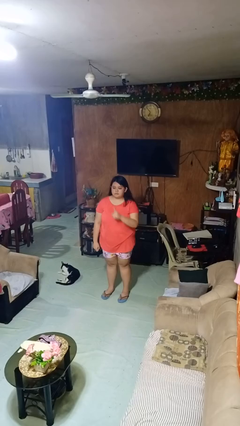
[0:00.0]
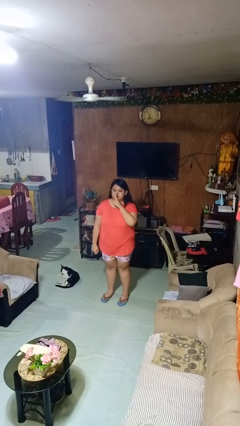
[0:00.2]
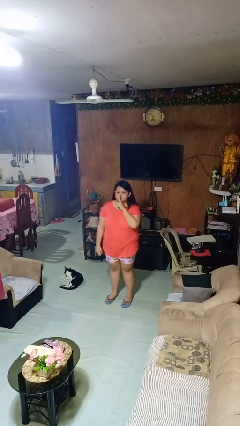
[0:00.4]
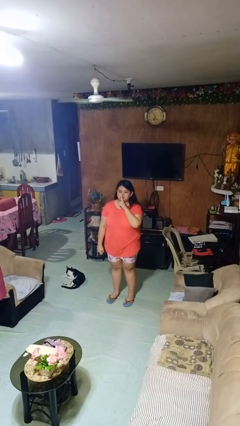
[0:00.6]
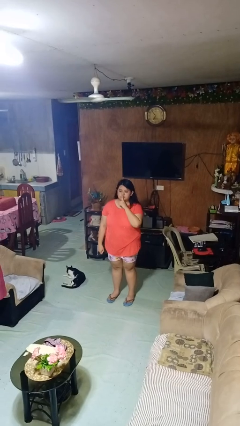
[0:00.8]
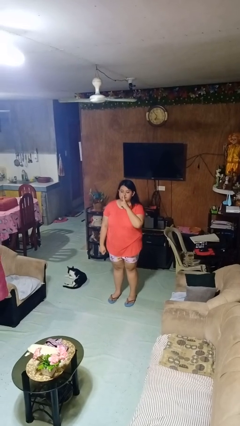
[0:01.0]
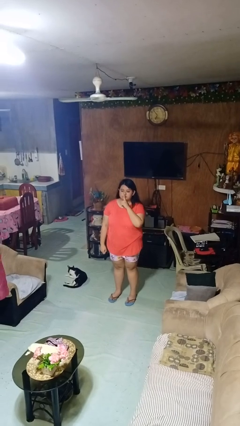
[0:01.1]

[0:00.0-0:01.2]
person gestures be quiet

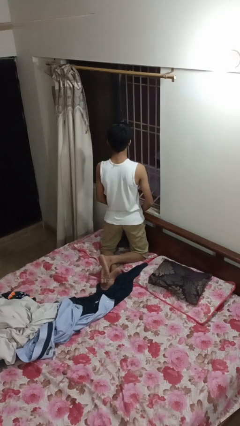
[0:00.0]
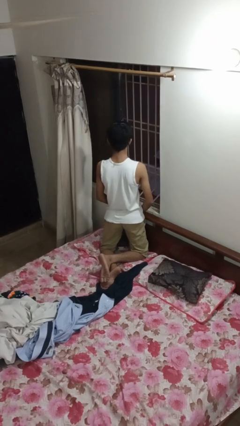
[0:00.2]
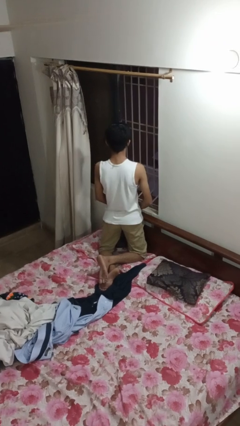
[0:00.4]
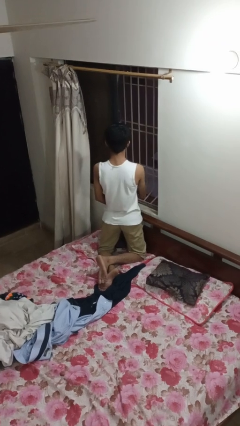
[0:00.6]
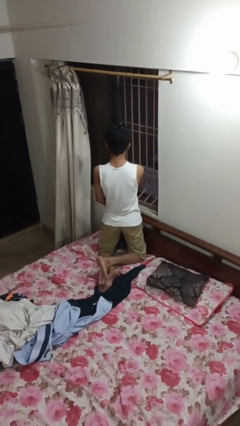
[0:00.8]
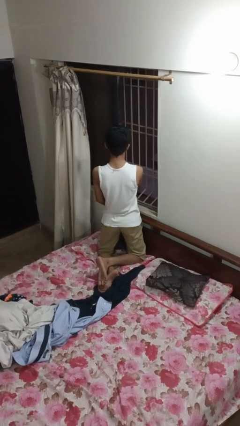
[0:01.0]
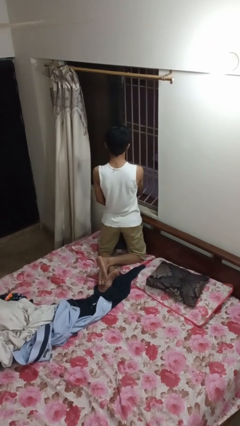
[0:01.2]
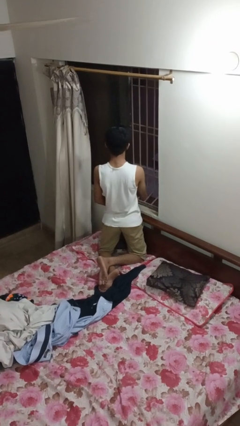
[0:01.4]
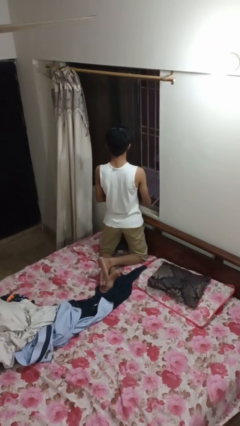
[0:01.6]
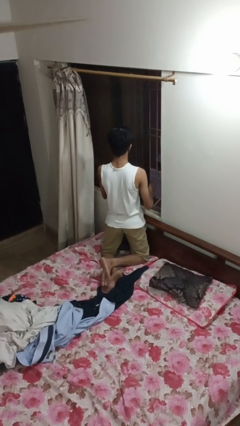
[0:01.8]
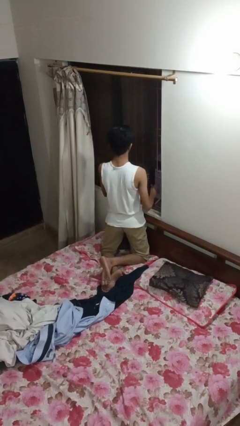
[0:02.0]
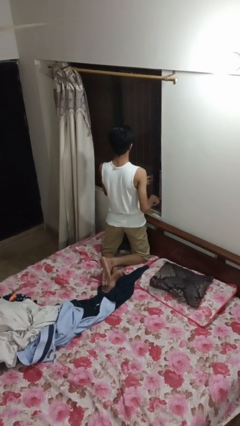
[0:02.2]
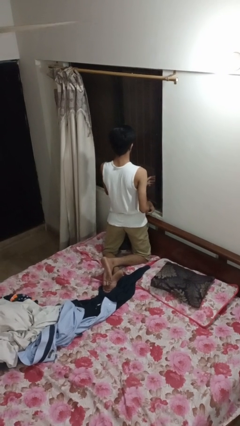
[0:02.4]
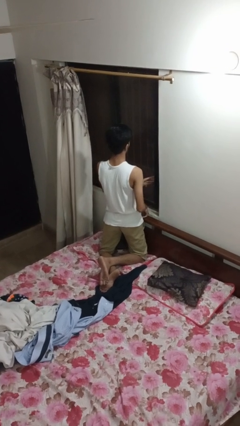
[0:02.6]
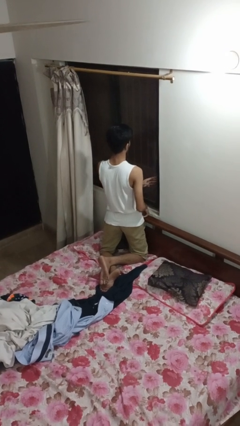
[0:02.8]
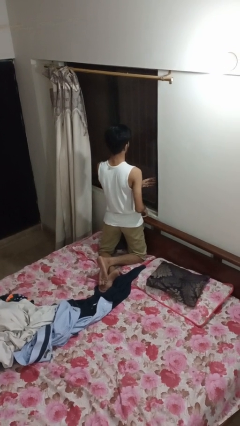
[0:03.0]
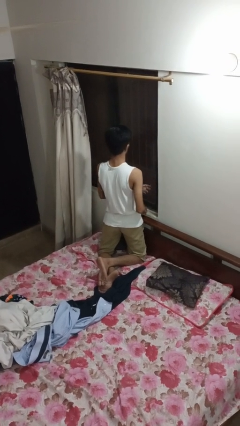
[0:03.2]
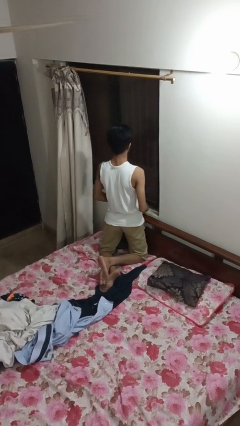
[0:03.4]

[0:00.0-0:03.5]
person closes home window

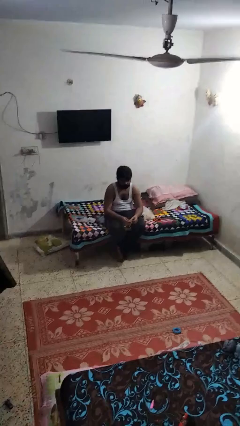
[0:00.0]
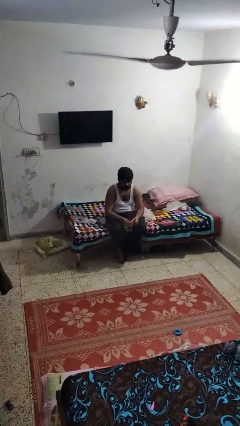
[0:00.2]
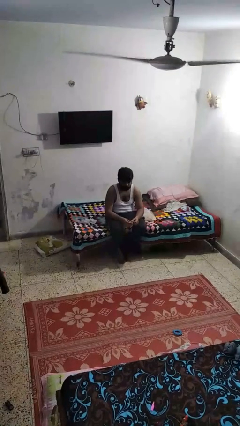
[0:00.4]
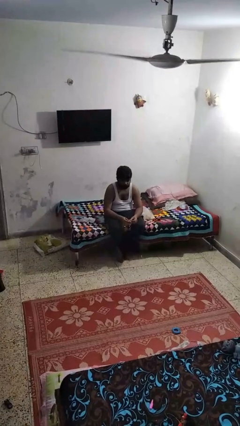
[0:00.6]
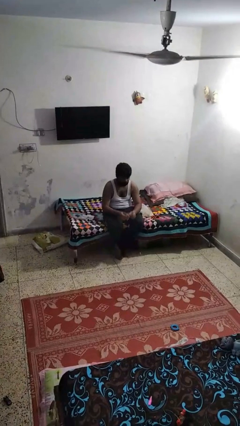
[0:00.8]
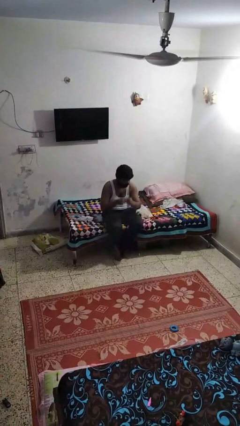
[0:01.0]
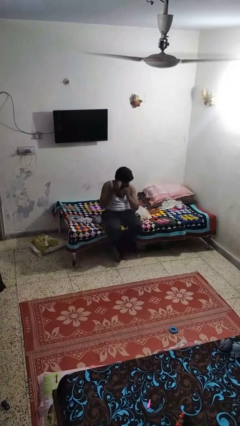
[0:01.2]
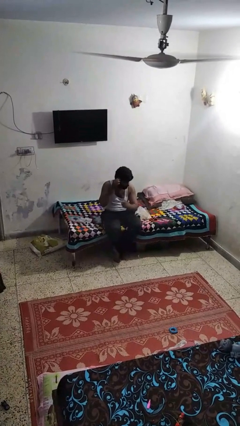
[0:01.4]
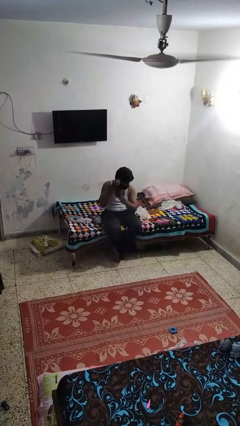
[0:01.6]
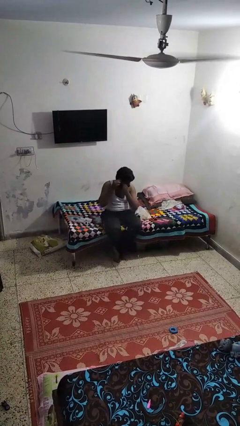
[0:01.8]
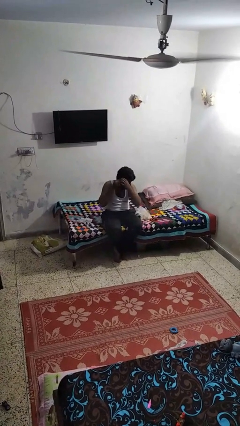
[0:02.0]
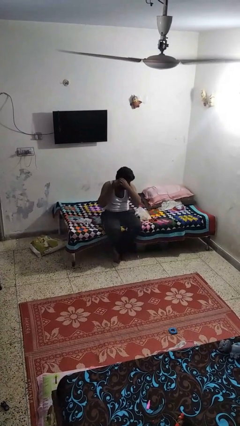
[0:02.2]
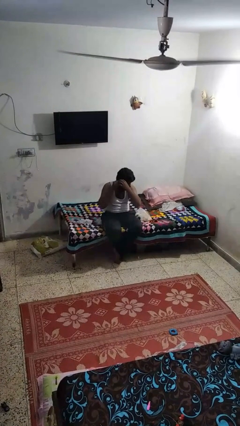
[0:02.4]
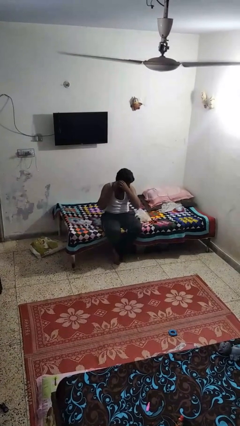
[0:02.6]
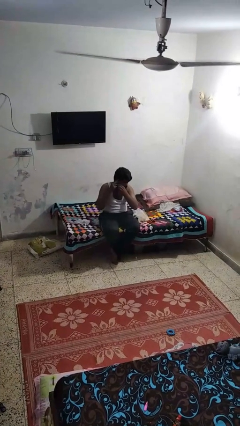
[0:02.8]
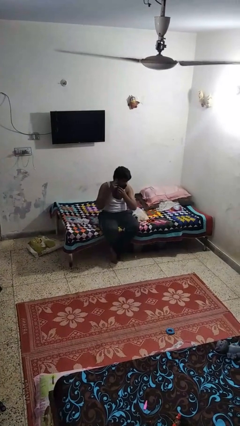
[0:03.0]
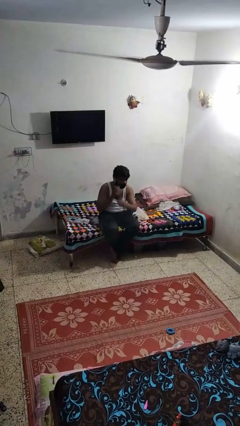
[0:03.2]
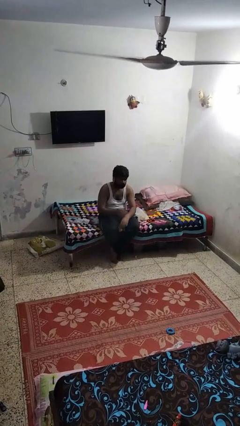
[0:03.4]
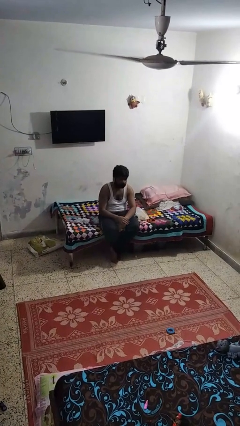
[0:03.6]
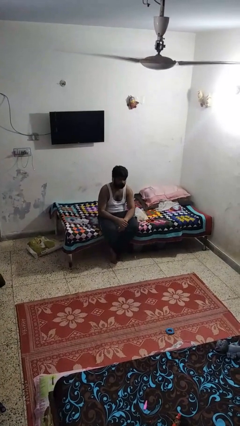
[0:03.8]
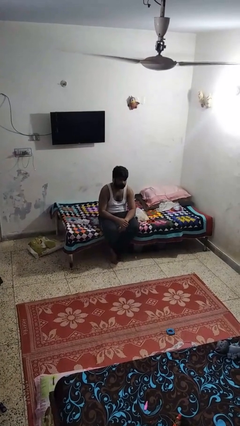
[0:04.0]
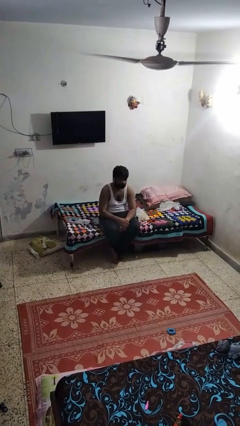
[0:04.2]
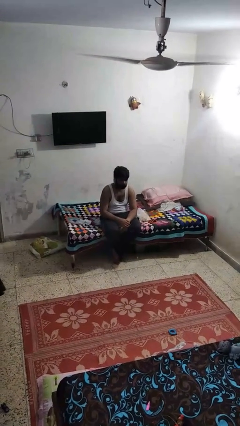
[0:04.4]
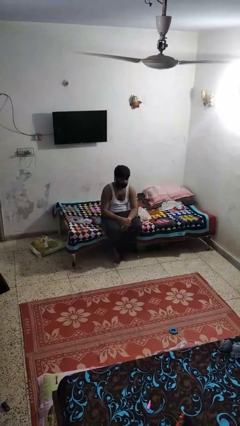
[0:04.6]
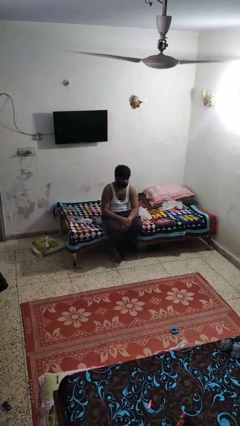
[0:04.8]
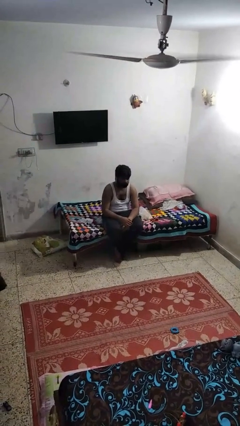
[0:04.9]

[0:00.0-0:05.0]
person puts on earrings

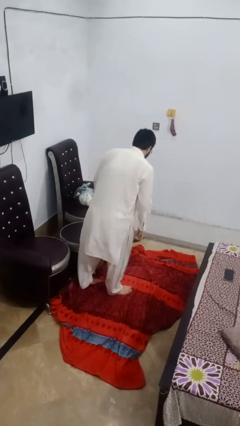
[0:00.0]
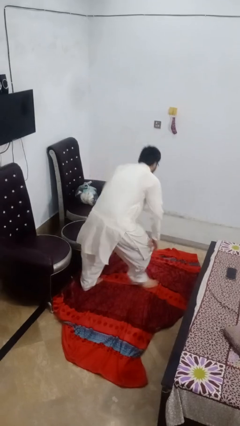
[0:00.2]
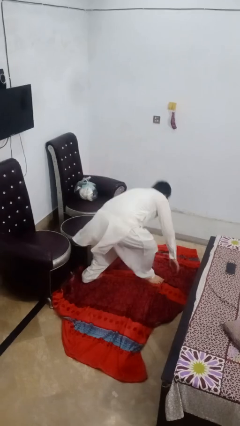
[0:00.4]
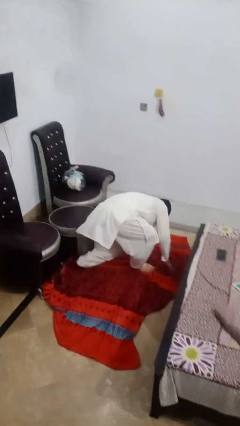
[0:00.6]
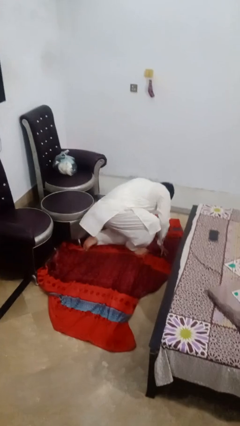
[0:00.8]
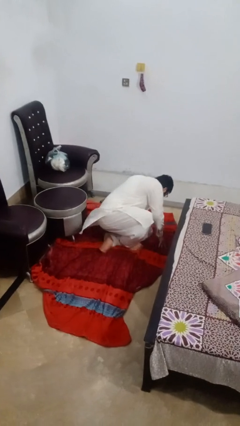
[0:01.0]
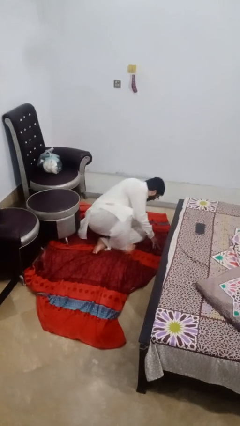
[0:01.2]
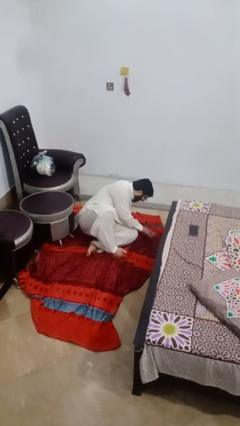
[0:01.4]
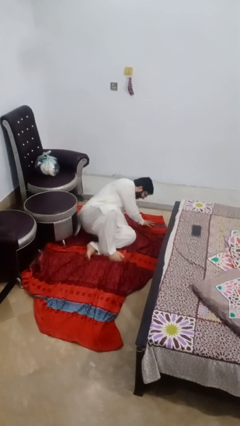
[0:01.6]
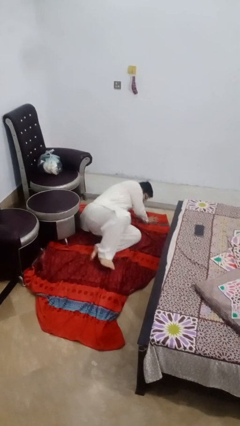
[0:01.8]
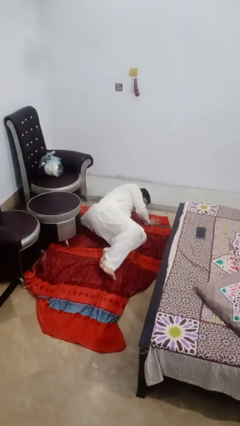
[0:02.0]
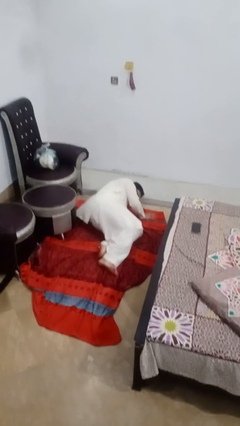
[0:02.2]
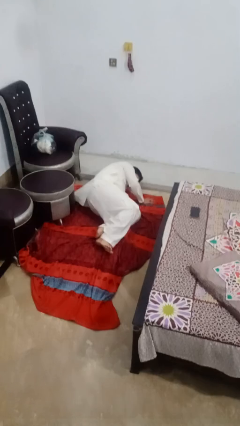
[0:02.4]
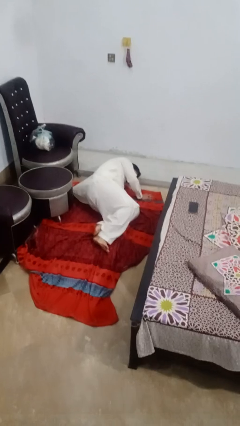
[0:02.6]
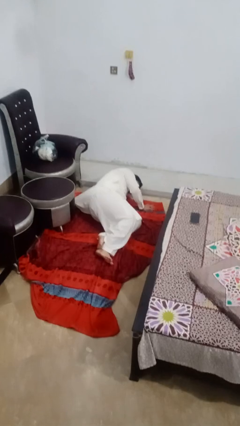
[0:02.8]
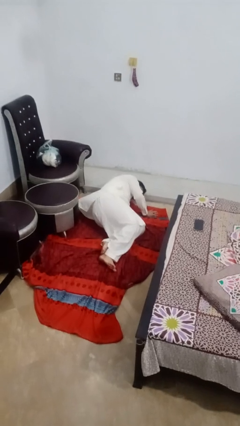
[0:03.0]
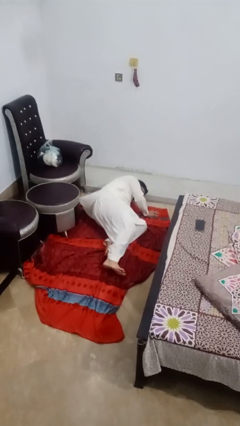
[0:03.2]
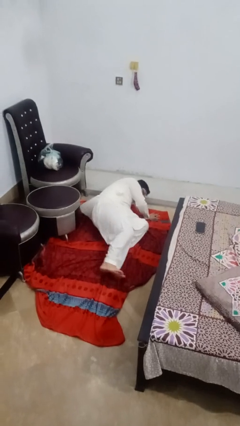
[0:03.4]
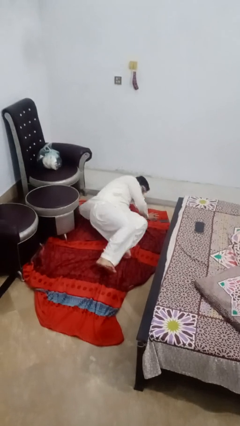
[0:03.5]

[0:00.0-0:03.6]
person lies down on floor

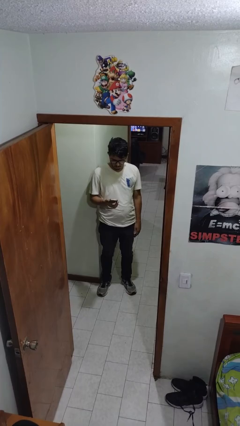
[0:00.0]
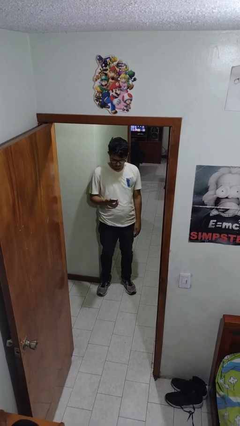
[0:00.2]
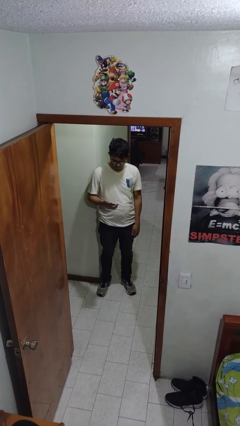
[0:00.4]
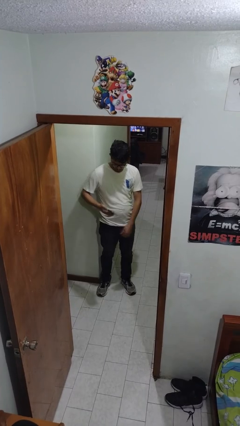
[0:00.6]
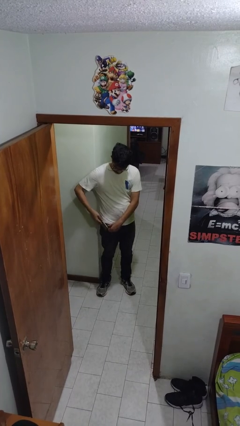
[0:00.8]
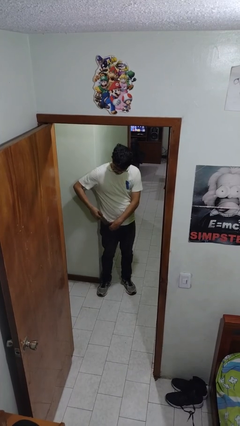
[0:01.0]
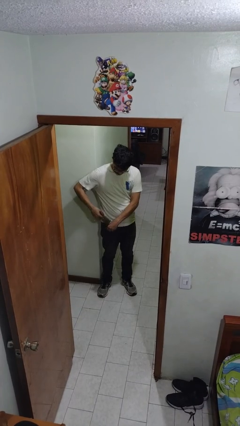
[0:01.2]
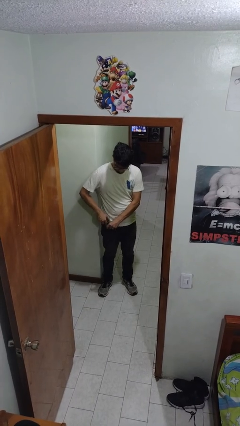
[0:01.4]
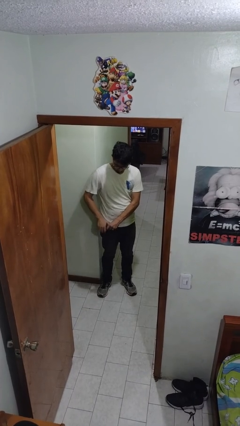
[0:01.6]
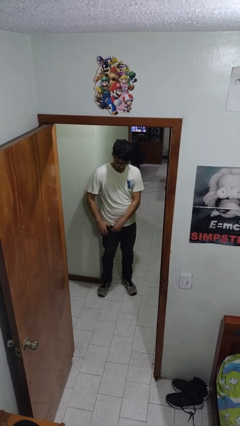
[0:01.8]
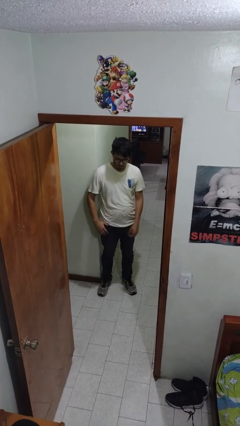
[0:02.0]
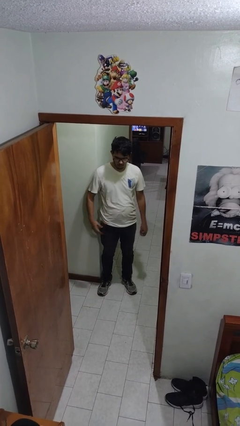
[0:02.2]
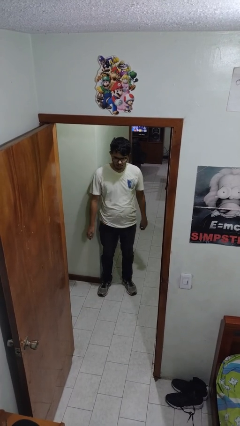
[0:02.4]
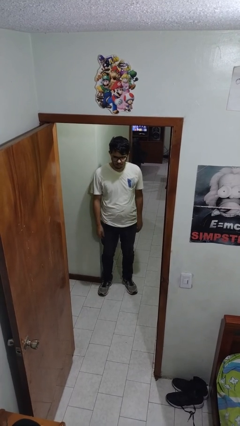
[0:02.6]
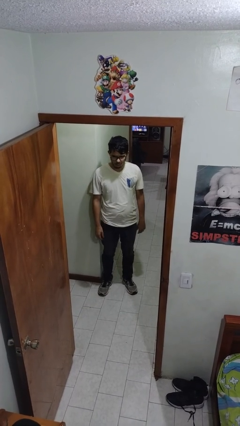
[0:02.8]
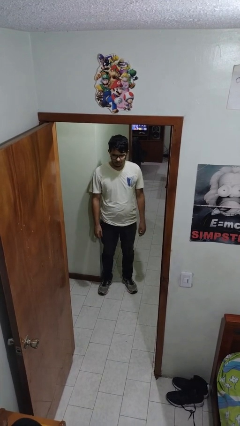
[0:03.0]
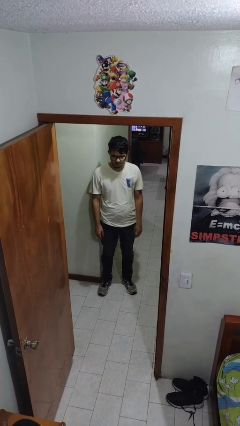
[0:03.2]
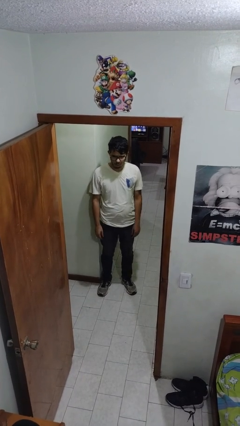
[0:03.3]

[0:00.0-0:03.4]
person puts phone into pocket

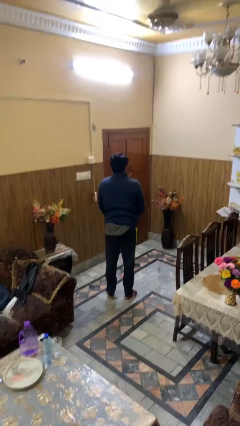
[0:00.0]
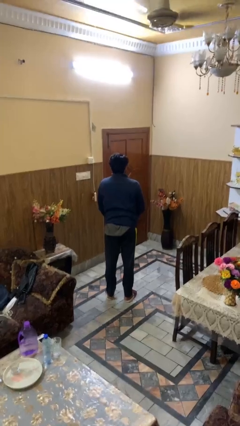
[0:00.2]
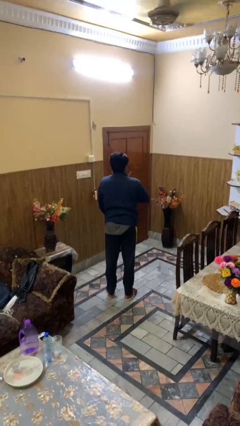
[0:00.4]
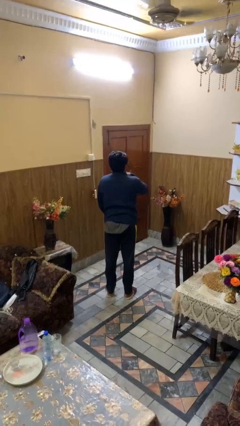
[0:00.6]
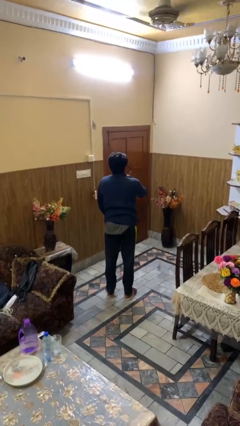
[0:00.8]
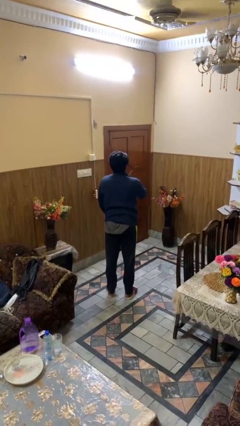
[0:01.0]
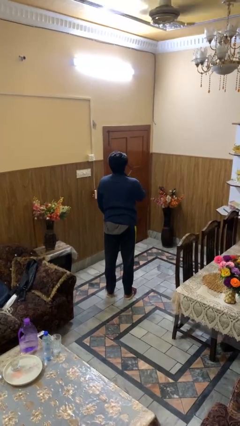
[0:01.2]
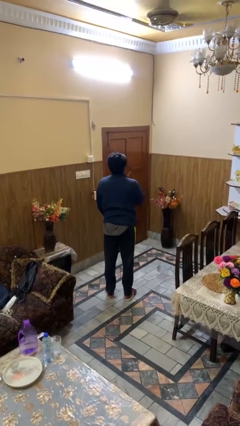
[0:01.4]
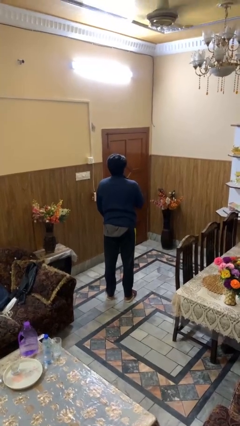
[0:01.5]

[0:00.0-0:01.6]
person zips up jacket
